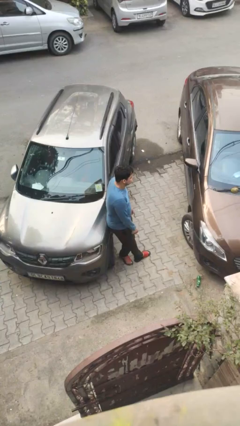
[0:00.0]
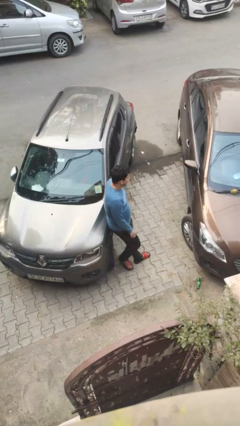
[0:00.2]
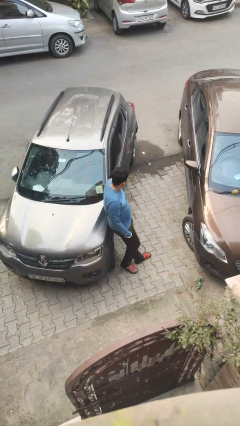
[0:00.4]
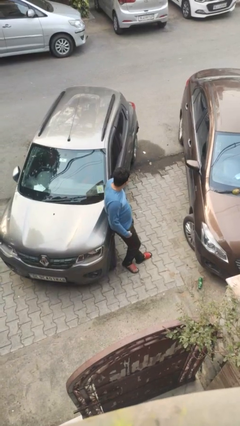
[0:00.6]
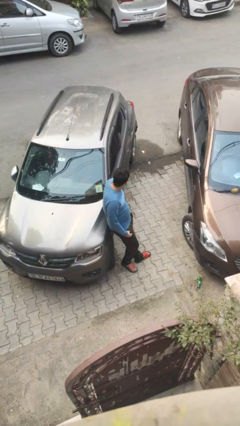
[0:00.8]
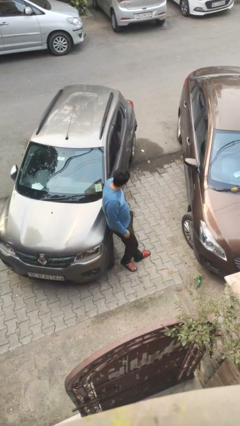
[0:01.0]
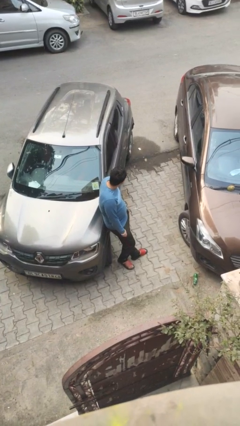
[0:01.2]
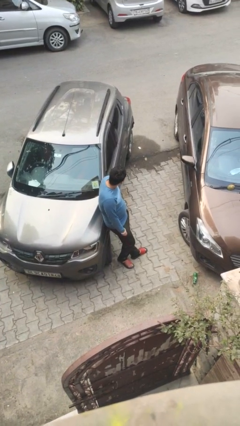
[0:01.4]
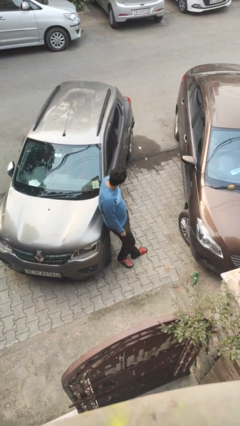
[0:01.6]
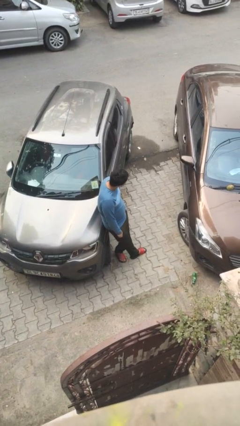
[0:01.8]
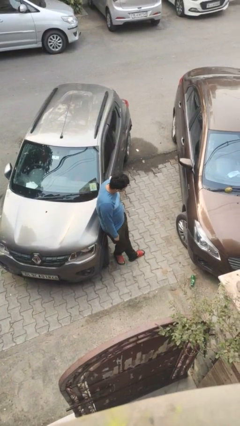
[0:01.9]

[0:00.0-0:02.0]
person leans against car

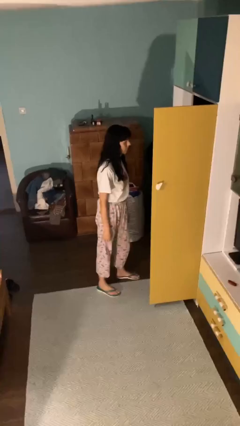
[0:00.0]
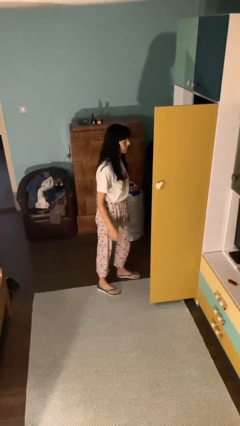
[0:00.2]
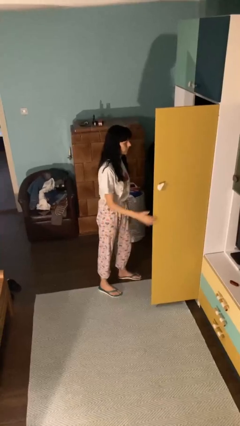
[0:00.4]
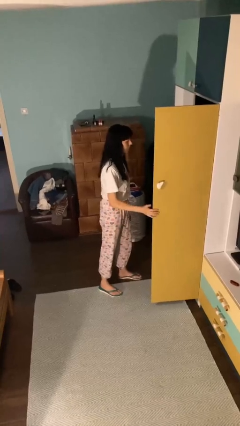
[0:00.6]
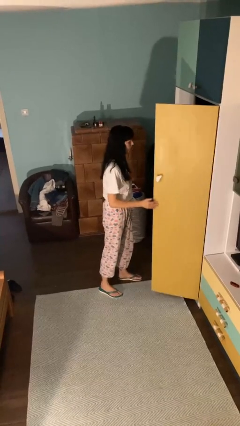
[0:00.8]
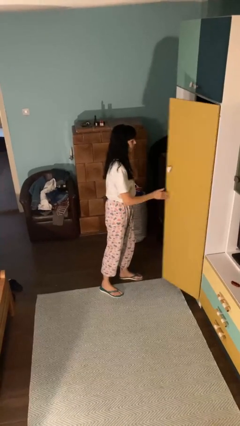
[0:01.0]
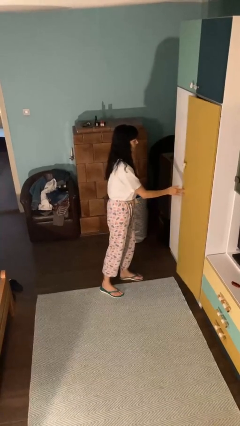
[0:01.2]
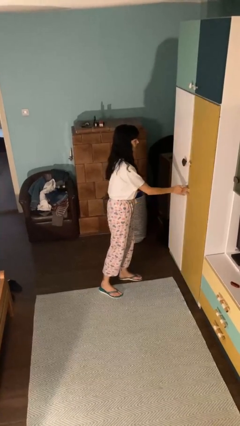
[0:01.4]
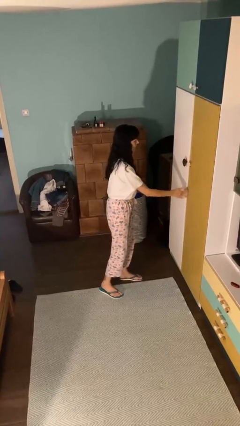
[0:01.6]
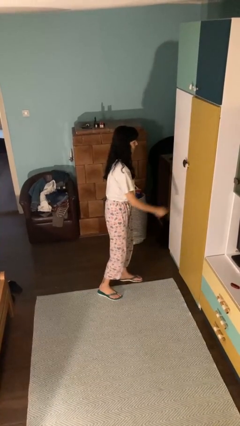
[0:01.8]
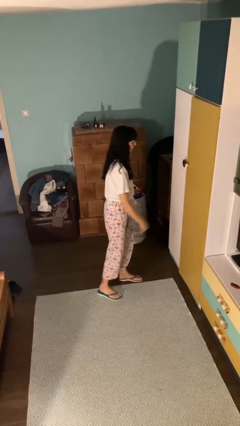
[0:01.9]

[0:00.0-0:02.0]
person closes closet door

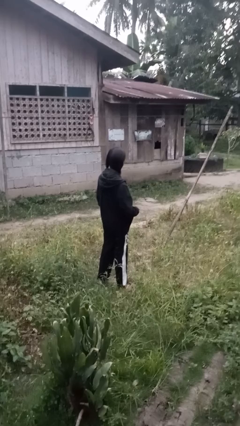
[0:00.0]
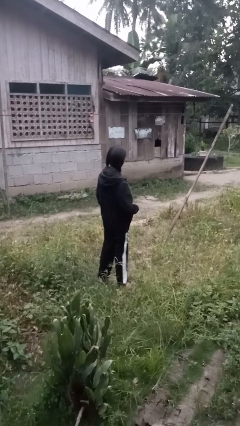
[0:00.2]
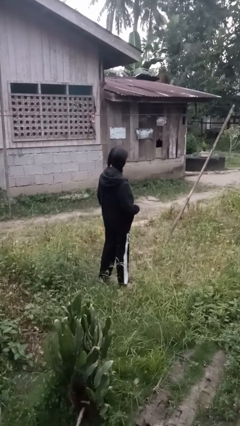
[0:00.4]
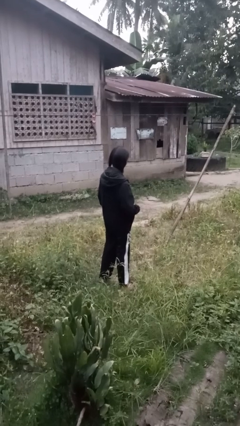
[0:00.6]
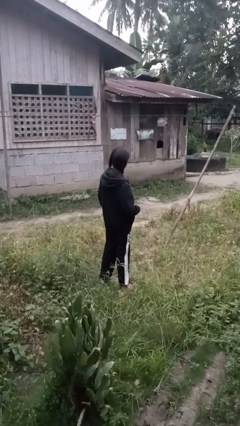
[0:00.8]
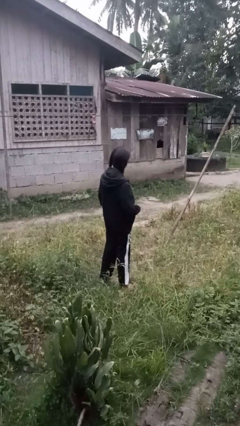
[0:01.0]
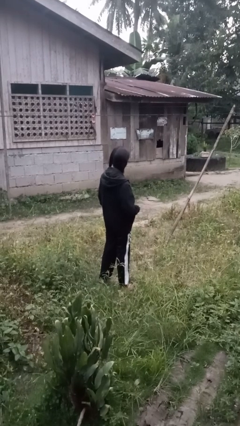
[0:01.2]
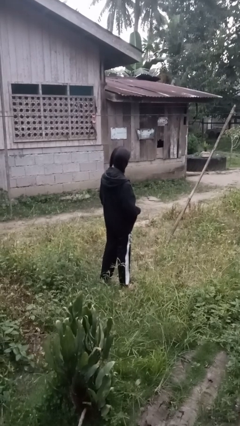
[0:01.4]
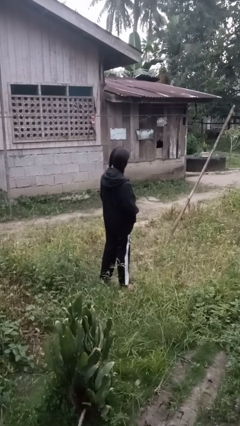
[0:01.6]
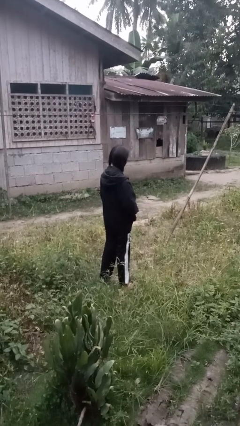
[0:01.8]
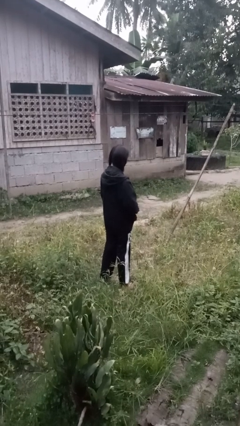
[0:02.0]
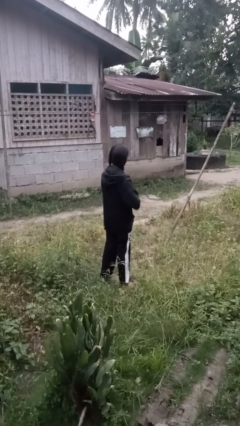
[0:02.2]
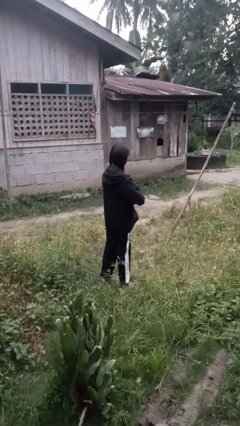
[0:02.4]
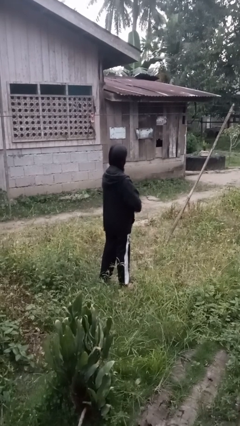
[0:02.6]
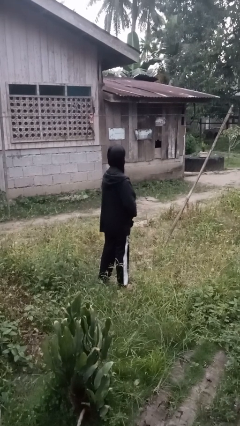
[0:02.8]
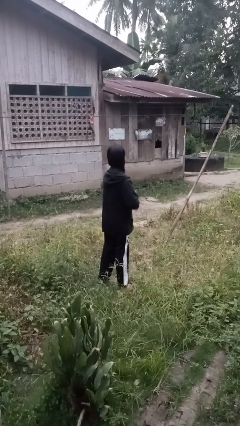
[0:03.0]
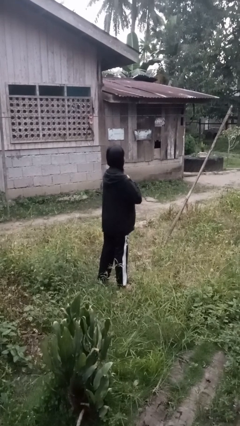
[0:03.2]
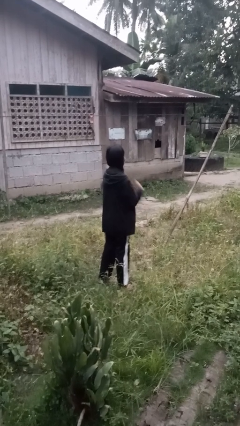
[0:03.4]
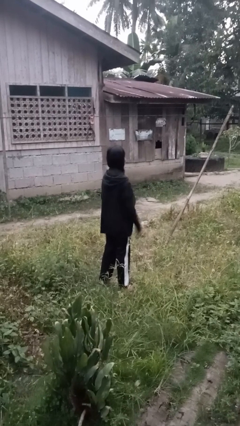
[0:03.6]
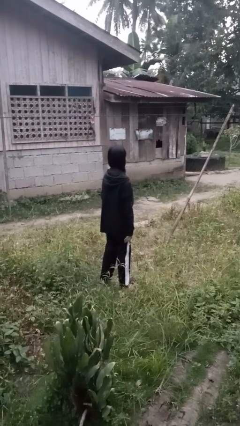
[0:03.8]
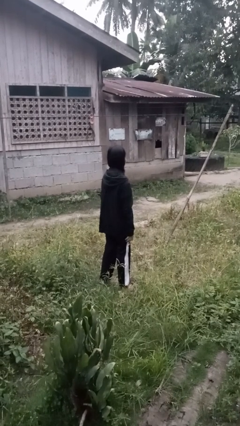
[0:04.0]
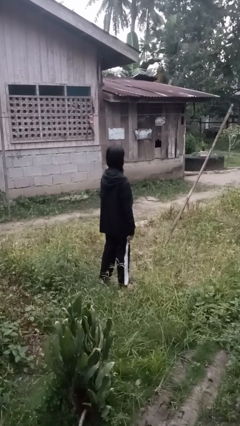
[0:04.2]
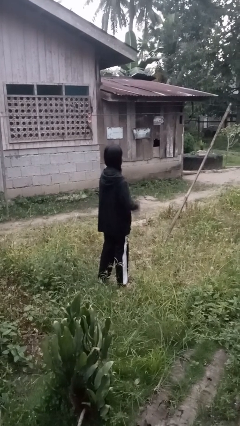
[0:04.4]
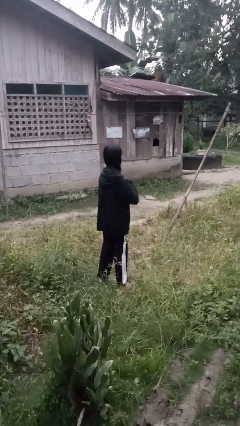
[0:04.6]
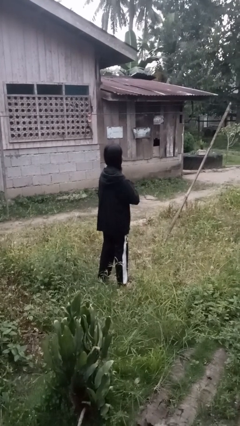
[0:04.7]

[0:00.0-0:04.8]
person zips up jacket

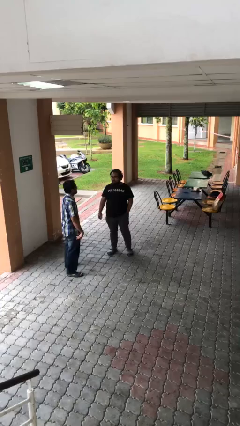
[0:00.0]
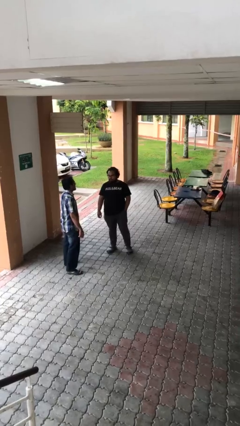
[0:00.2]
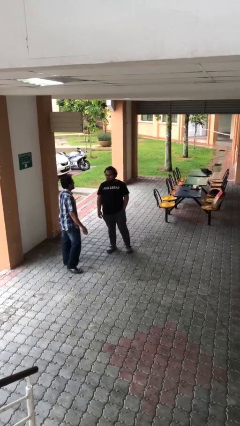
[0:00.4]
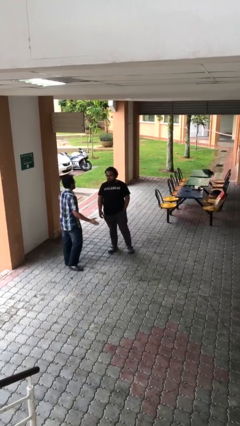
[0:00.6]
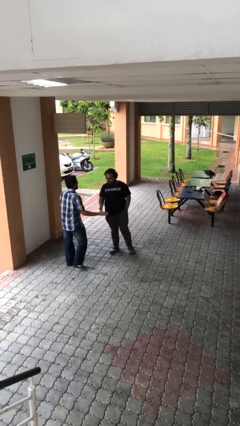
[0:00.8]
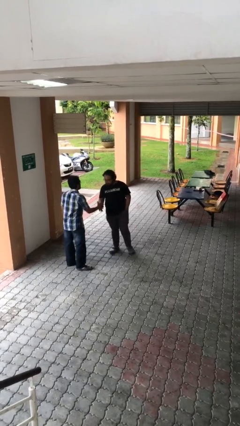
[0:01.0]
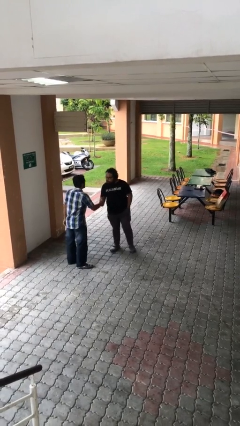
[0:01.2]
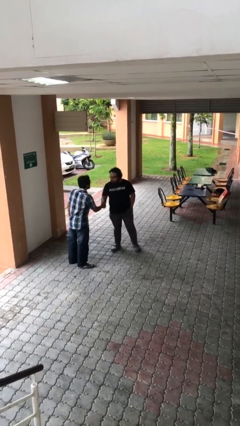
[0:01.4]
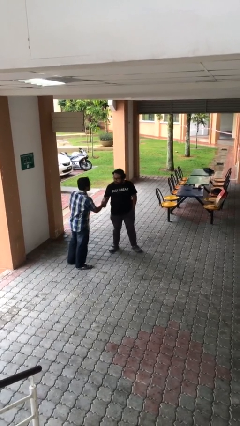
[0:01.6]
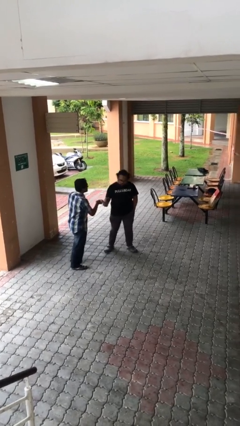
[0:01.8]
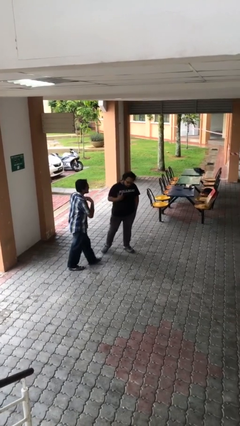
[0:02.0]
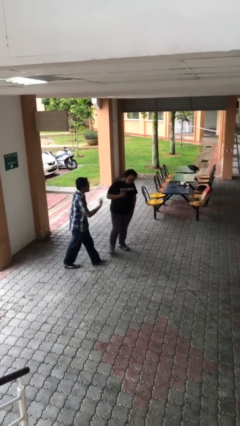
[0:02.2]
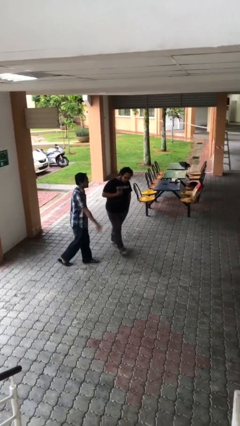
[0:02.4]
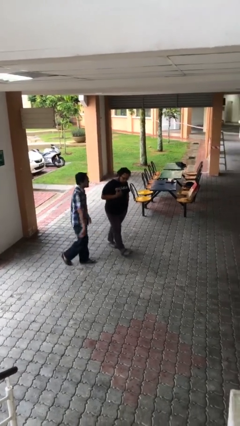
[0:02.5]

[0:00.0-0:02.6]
person shakes hand

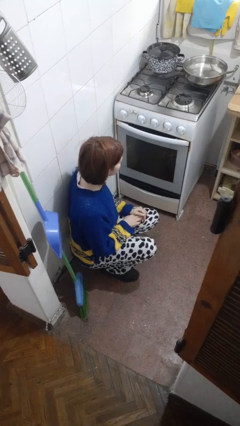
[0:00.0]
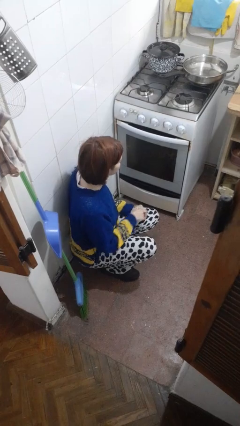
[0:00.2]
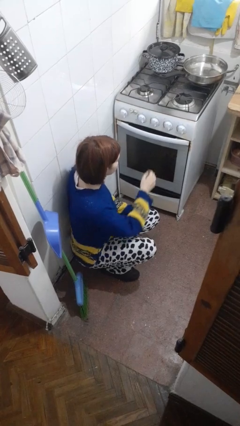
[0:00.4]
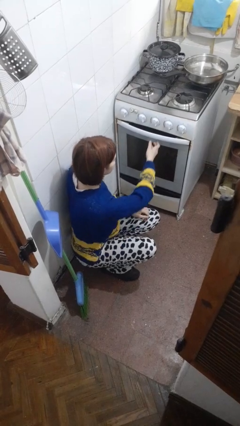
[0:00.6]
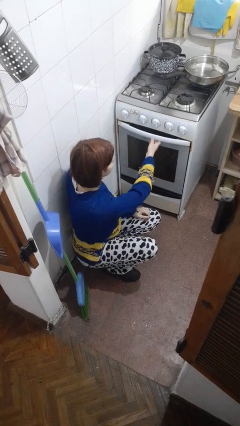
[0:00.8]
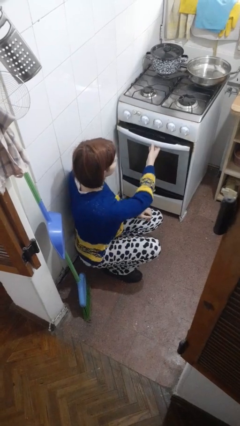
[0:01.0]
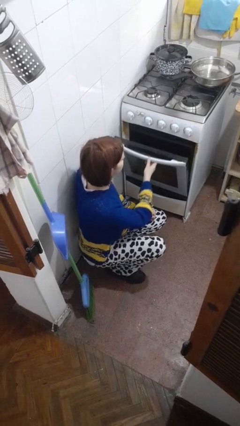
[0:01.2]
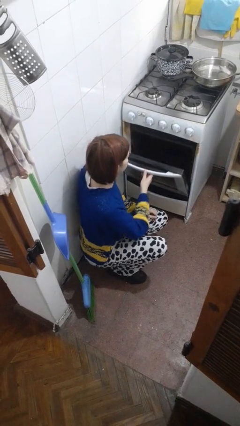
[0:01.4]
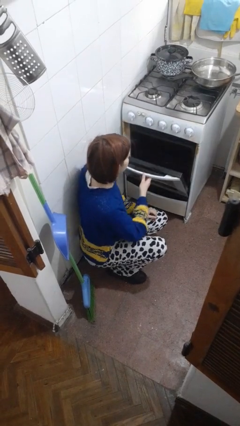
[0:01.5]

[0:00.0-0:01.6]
person opens oven door

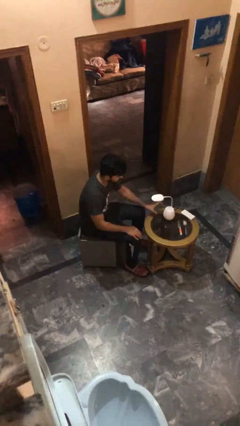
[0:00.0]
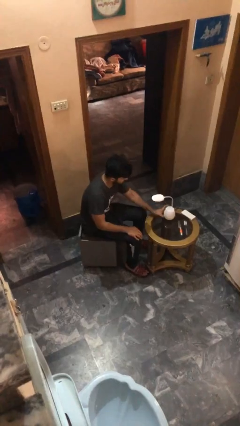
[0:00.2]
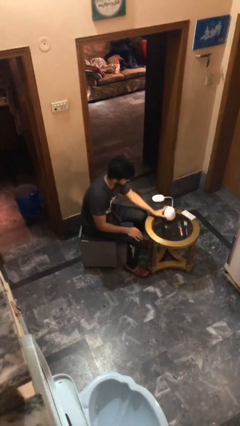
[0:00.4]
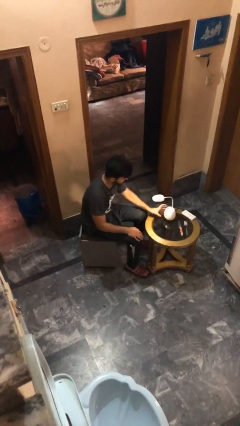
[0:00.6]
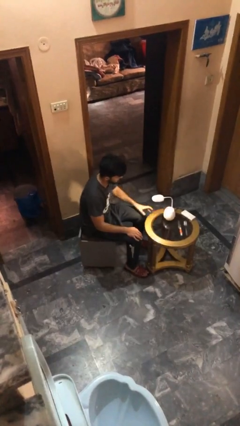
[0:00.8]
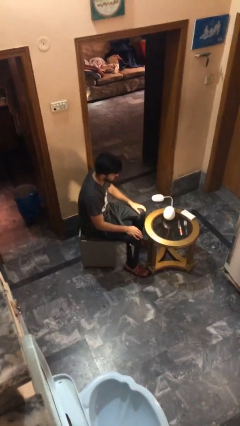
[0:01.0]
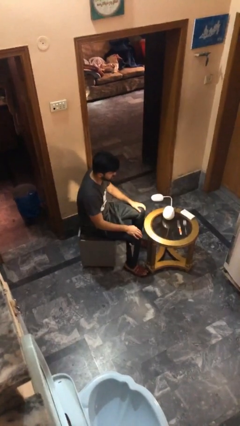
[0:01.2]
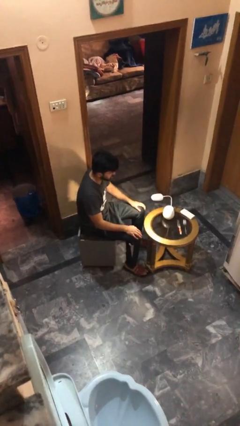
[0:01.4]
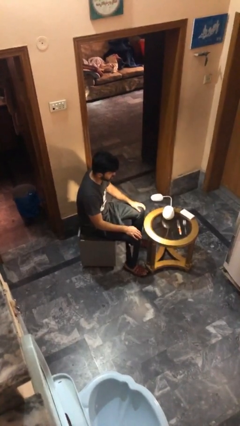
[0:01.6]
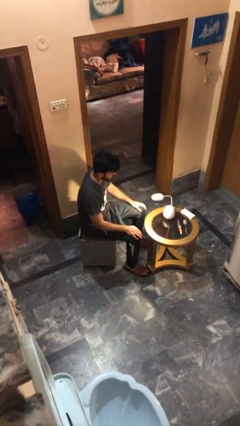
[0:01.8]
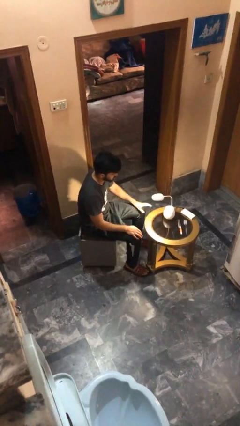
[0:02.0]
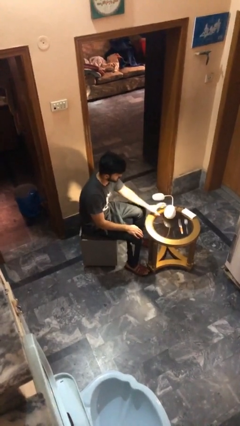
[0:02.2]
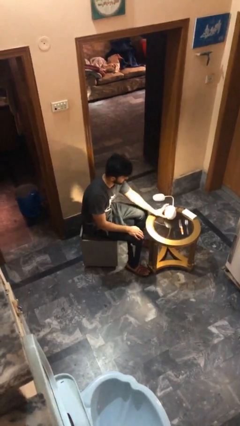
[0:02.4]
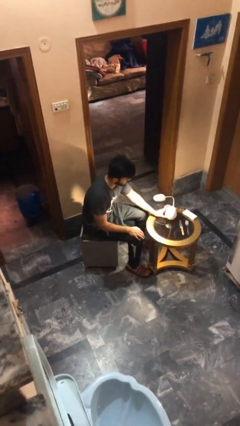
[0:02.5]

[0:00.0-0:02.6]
person turns on lamp

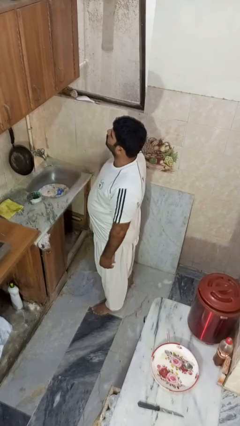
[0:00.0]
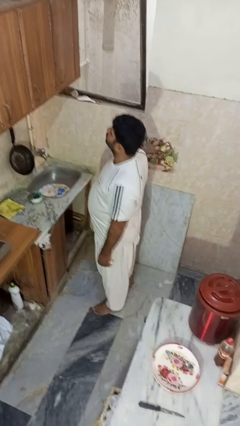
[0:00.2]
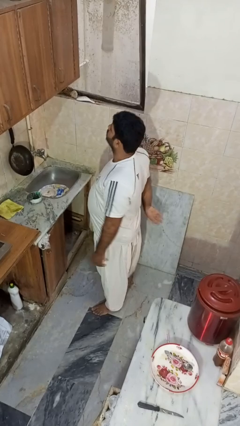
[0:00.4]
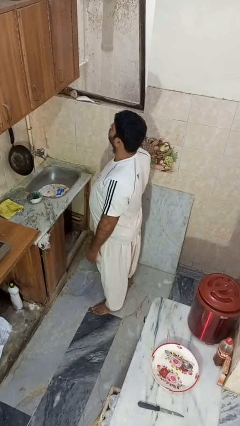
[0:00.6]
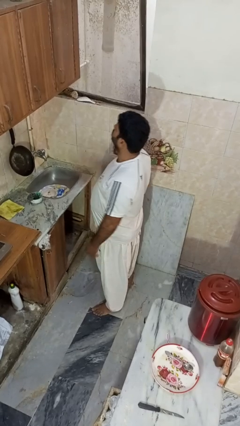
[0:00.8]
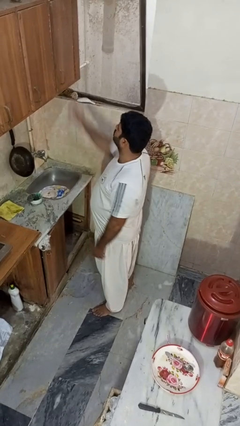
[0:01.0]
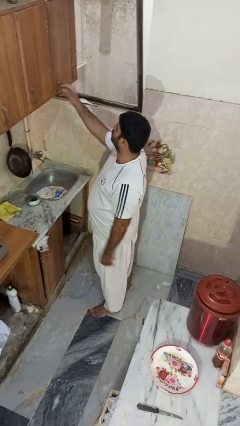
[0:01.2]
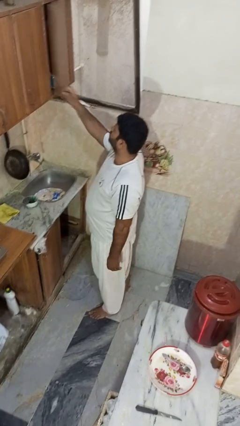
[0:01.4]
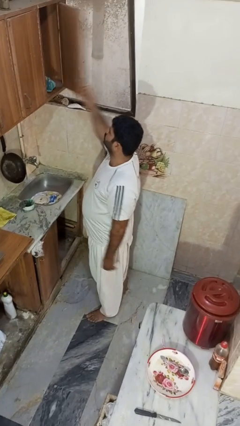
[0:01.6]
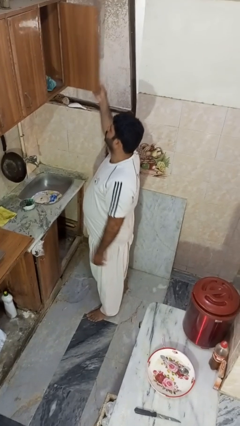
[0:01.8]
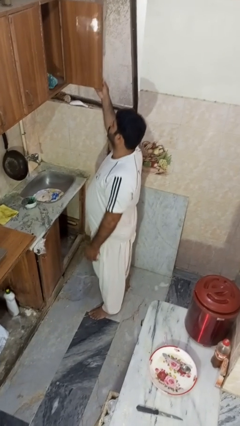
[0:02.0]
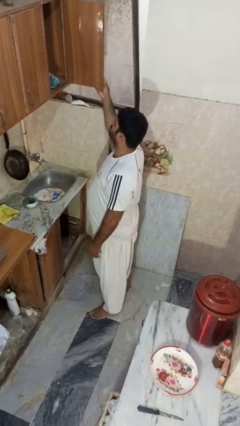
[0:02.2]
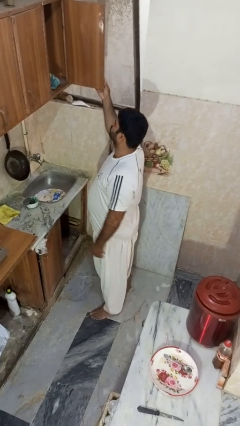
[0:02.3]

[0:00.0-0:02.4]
person opens cabinet
